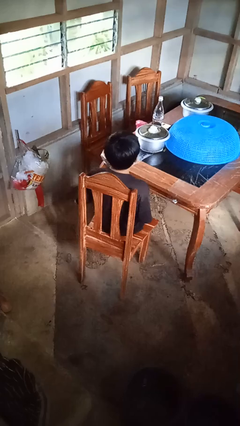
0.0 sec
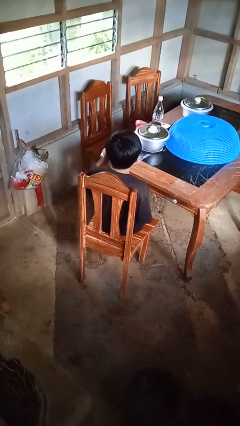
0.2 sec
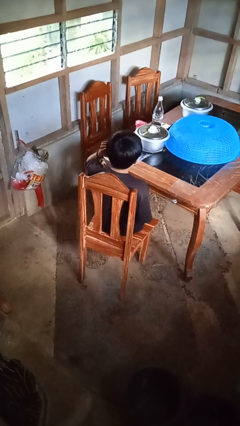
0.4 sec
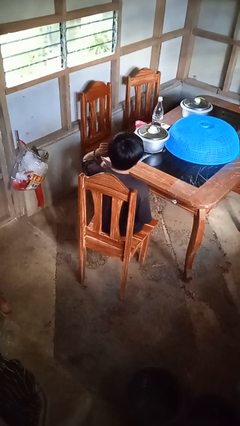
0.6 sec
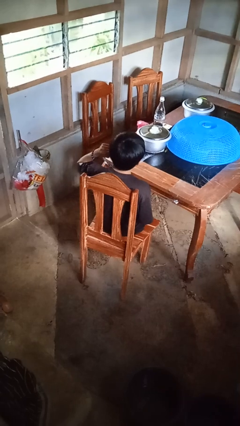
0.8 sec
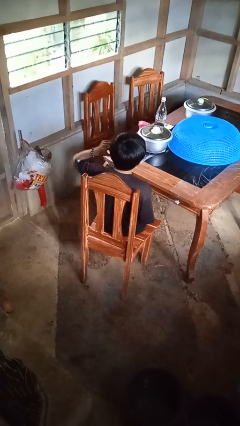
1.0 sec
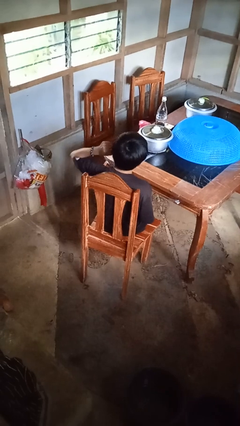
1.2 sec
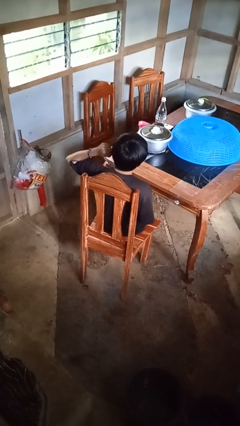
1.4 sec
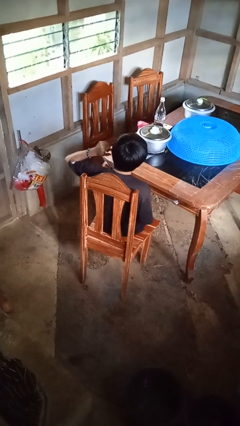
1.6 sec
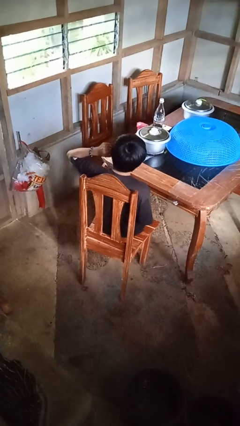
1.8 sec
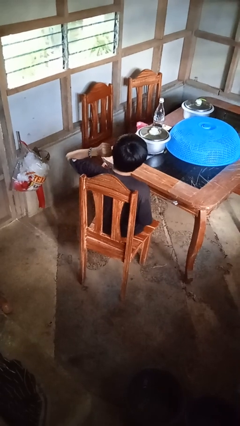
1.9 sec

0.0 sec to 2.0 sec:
person touches earlobe

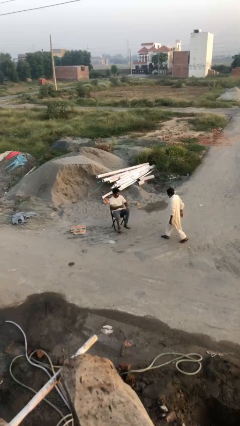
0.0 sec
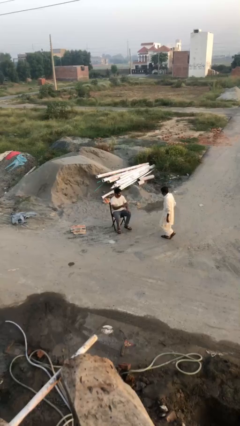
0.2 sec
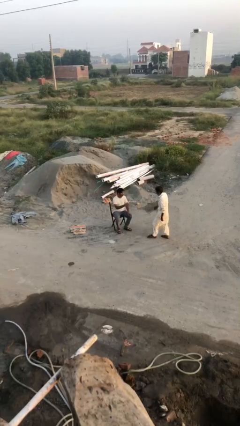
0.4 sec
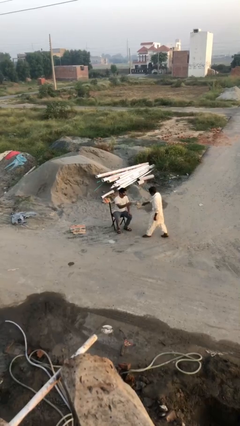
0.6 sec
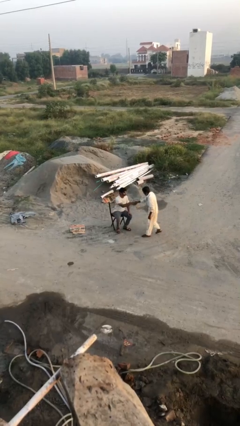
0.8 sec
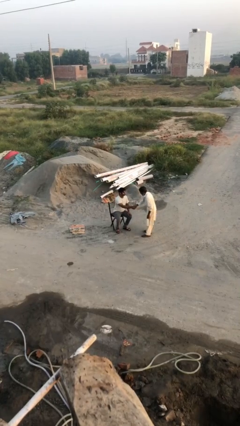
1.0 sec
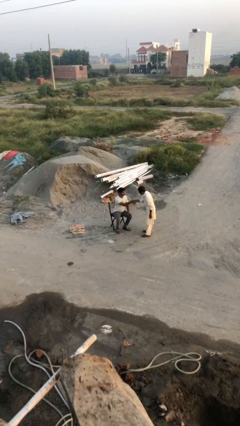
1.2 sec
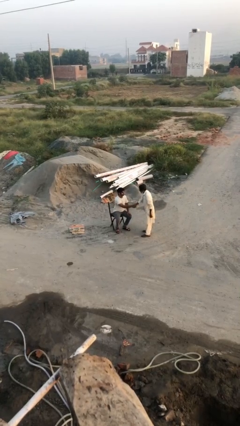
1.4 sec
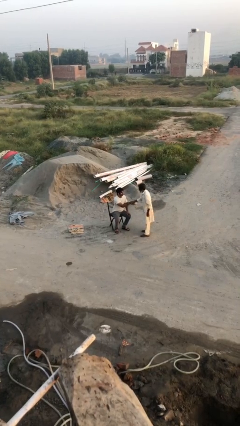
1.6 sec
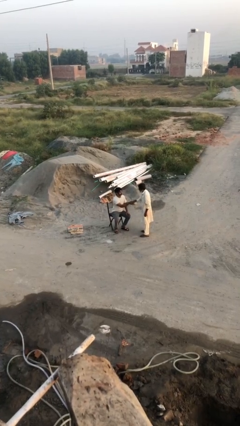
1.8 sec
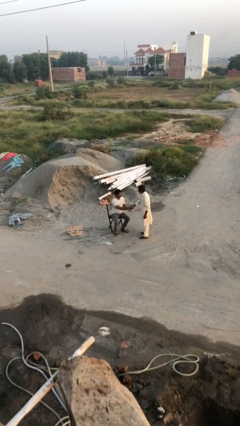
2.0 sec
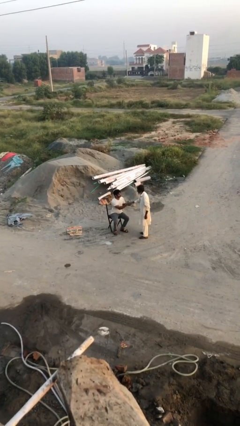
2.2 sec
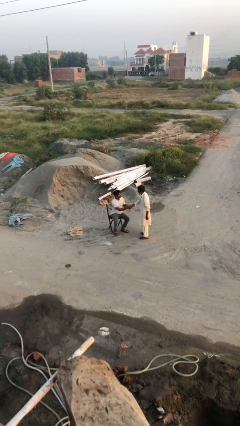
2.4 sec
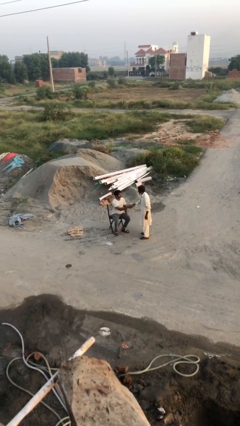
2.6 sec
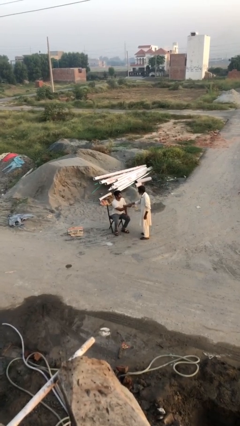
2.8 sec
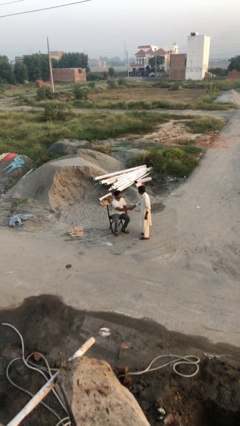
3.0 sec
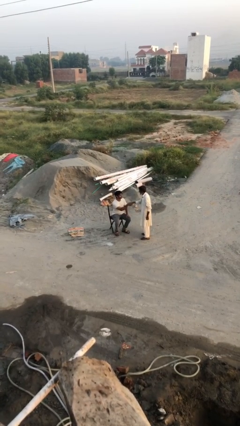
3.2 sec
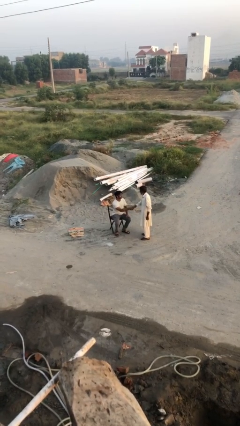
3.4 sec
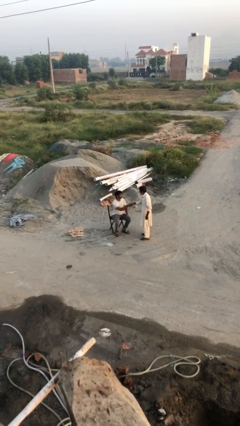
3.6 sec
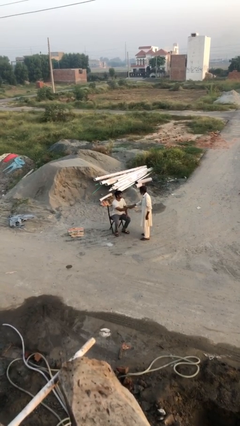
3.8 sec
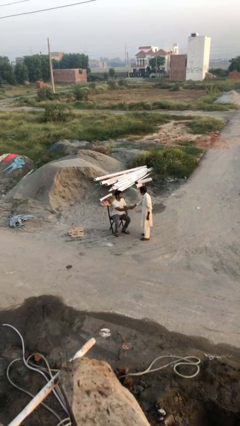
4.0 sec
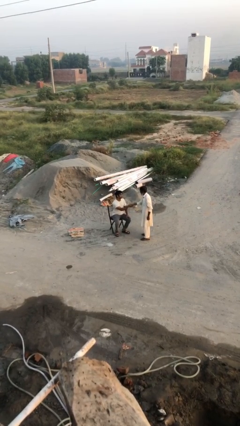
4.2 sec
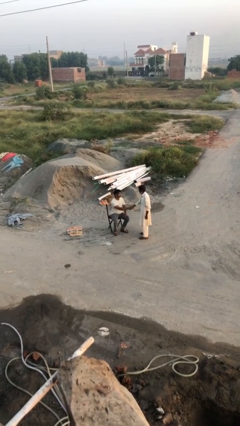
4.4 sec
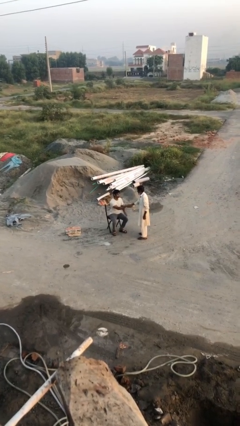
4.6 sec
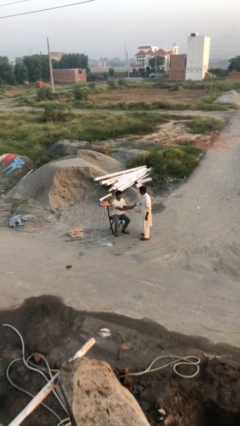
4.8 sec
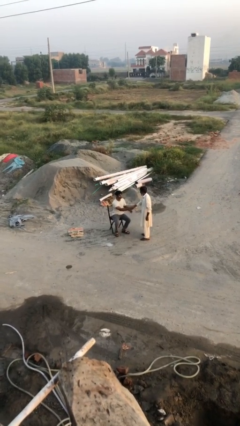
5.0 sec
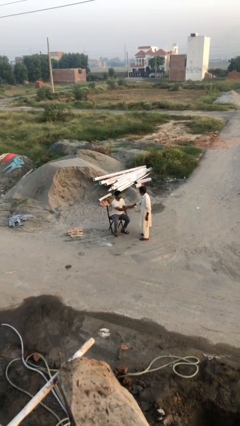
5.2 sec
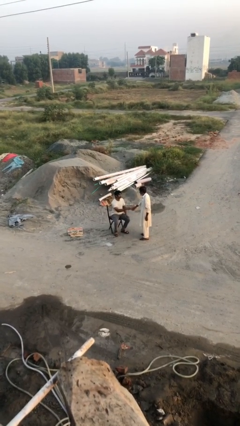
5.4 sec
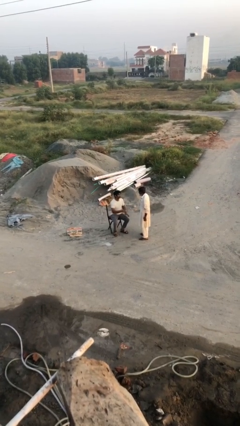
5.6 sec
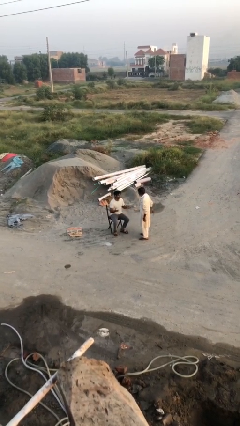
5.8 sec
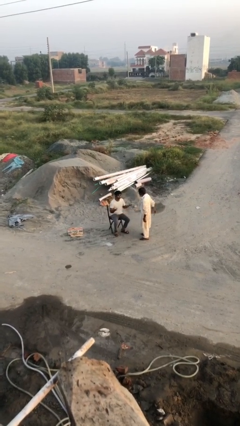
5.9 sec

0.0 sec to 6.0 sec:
person shakes hand

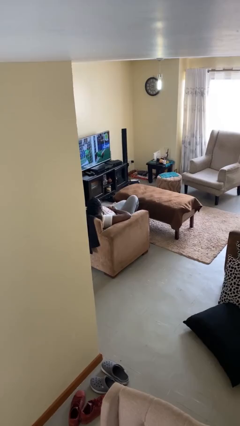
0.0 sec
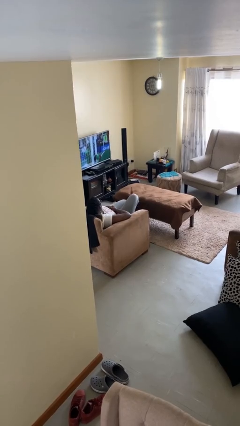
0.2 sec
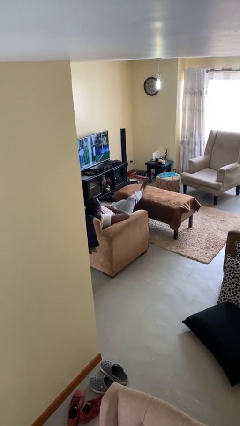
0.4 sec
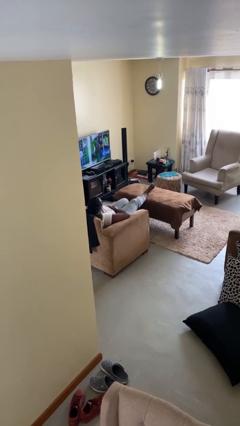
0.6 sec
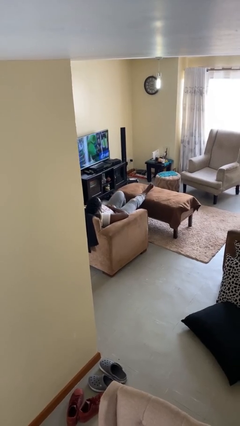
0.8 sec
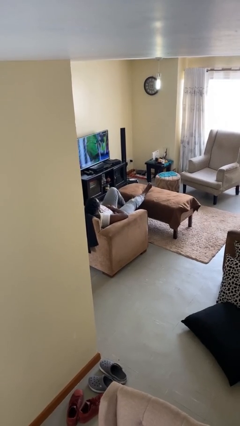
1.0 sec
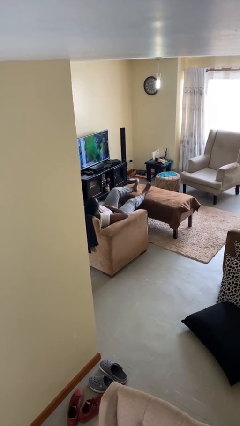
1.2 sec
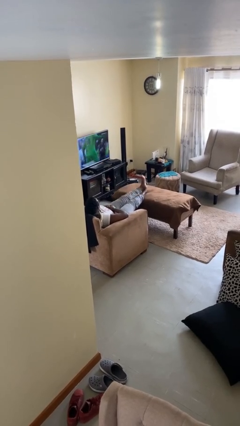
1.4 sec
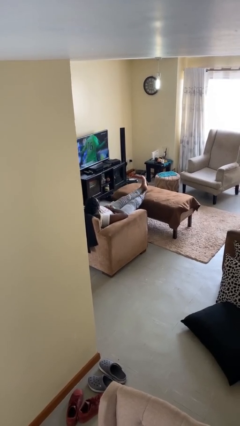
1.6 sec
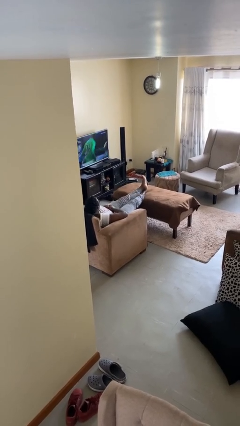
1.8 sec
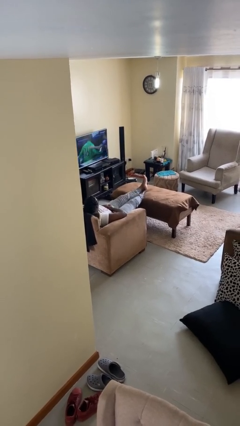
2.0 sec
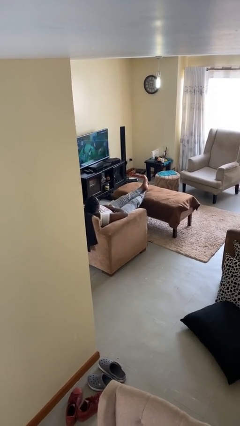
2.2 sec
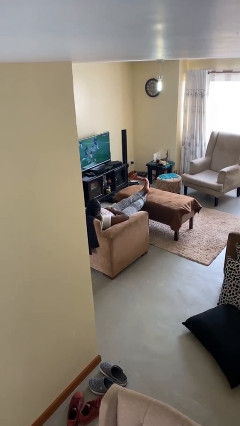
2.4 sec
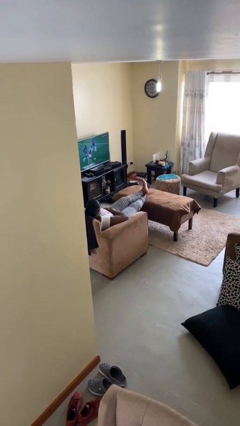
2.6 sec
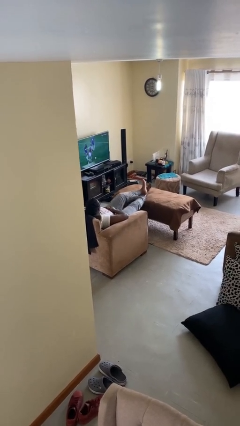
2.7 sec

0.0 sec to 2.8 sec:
person puts feet up

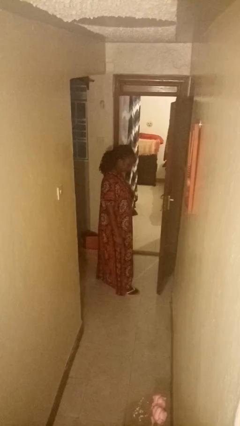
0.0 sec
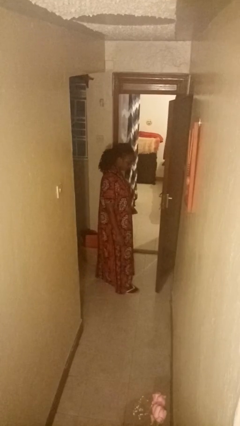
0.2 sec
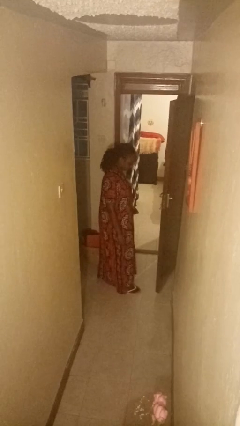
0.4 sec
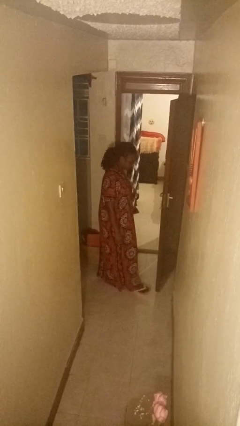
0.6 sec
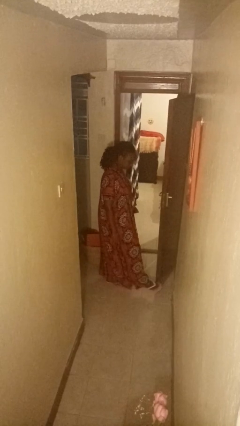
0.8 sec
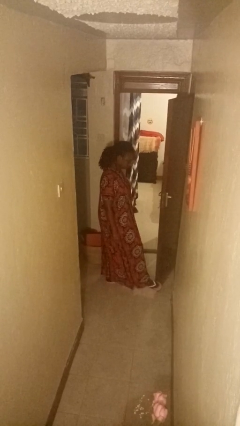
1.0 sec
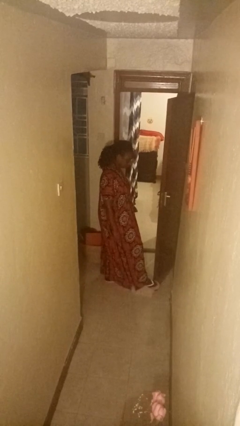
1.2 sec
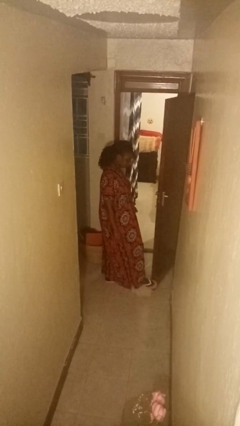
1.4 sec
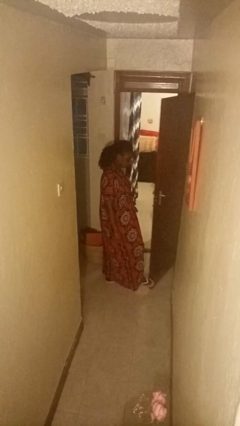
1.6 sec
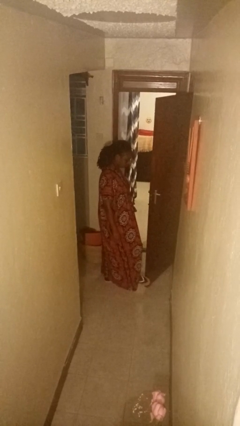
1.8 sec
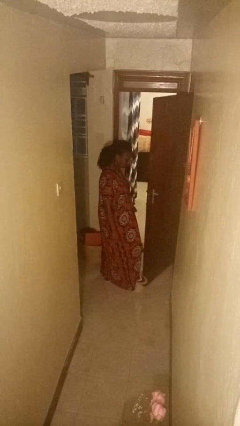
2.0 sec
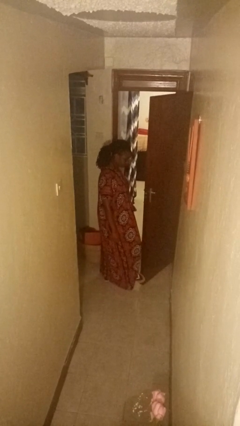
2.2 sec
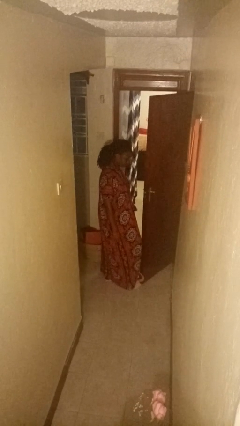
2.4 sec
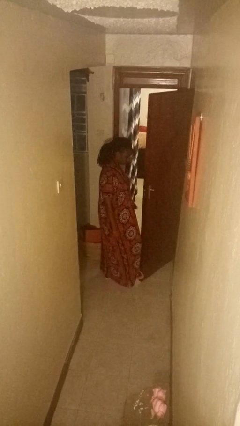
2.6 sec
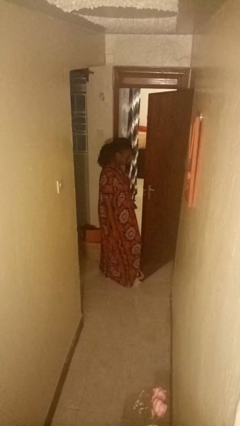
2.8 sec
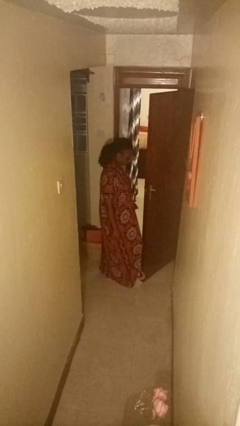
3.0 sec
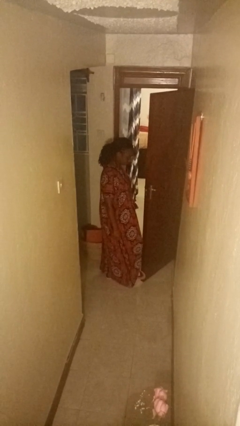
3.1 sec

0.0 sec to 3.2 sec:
person opens facility door

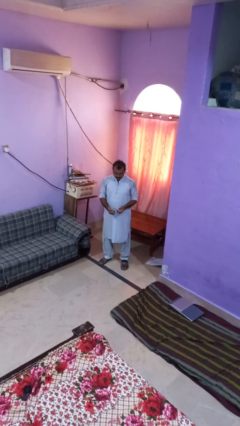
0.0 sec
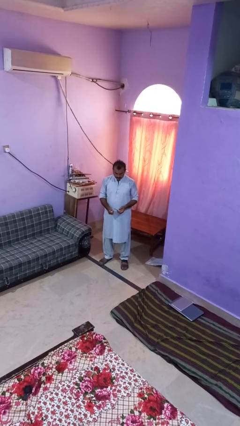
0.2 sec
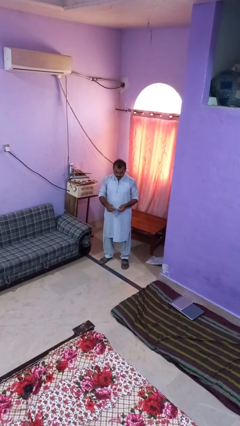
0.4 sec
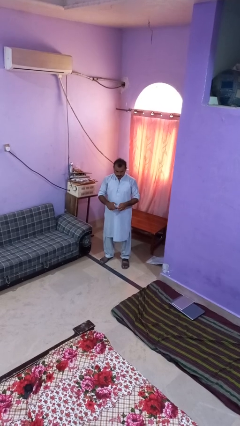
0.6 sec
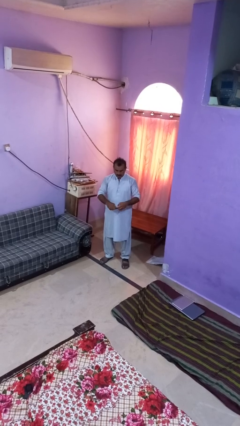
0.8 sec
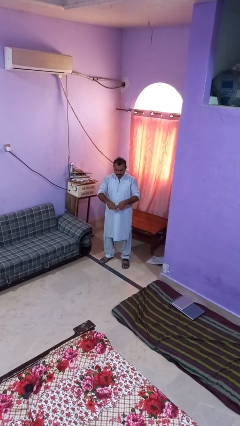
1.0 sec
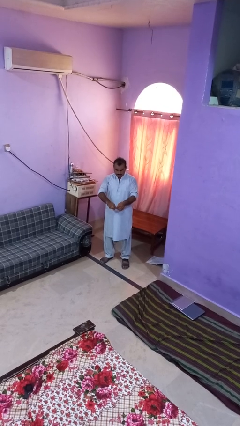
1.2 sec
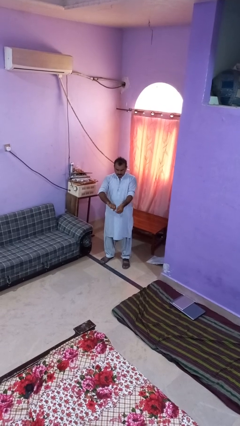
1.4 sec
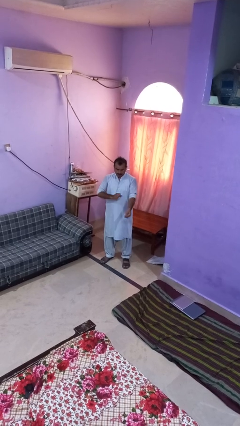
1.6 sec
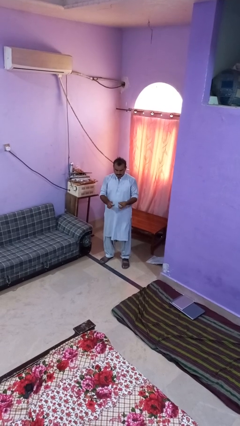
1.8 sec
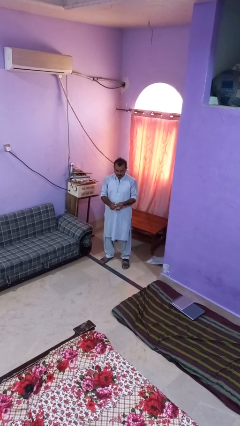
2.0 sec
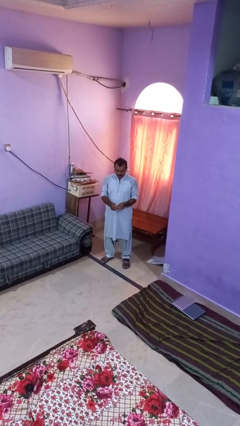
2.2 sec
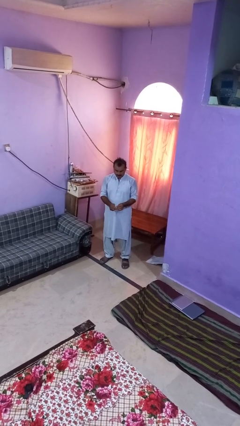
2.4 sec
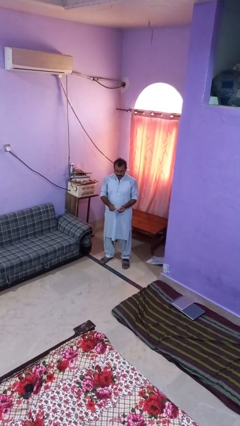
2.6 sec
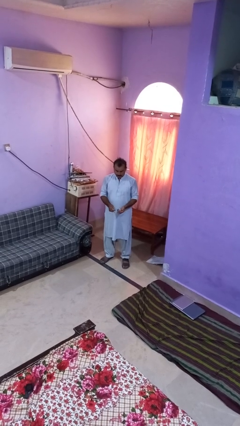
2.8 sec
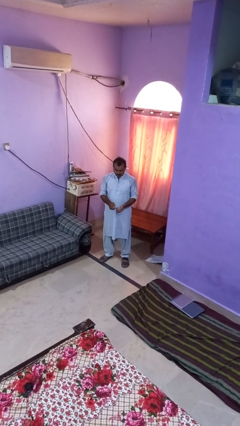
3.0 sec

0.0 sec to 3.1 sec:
person tears paper

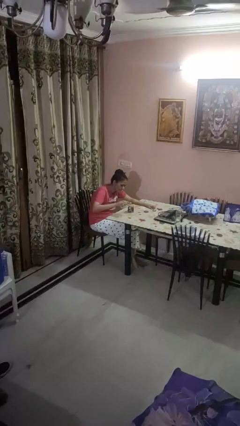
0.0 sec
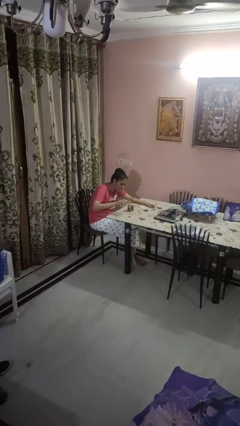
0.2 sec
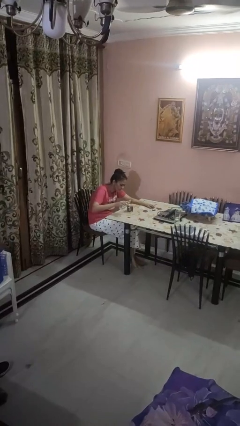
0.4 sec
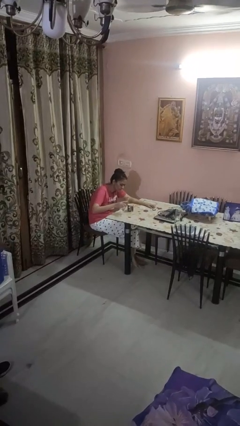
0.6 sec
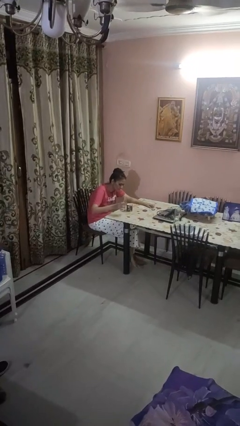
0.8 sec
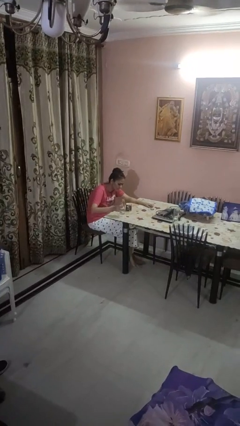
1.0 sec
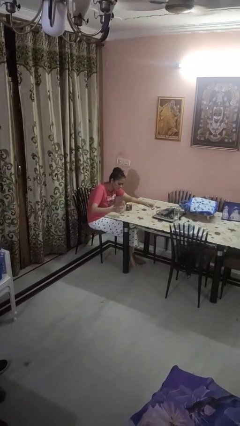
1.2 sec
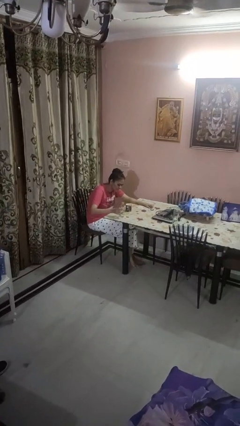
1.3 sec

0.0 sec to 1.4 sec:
person pours liquid into cup
